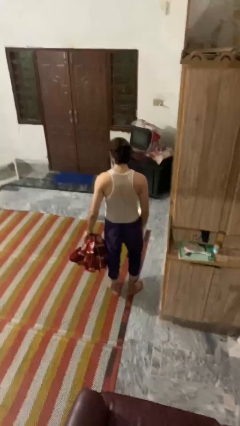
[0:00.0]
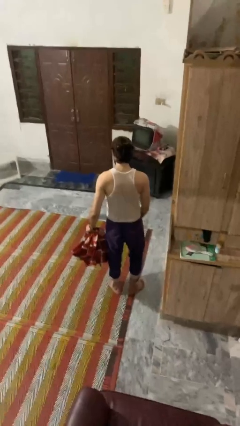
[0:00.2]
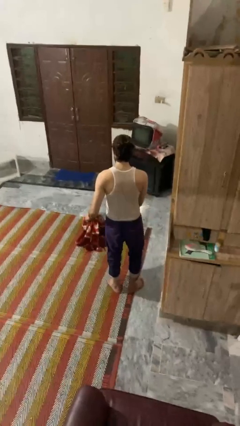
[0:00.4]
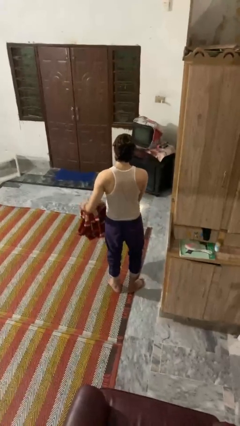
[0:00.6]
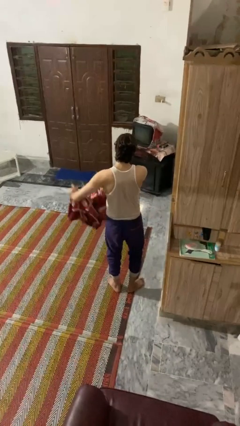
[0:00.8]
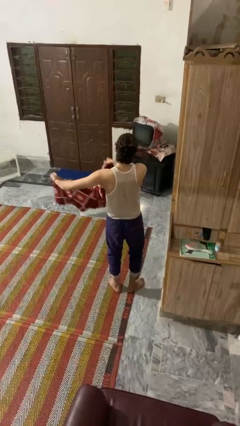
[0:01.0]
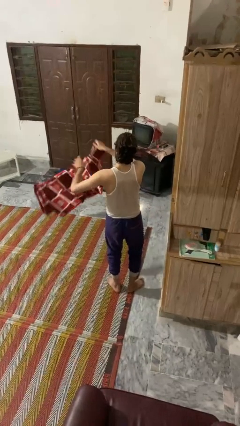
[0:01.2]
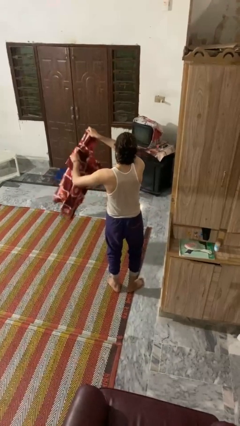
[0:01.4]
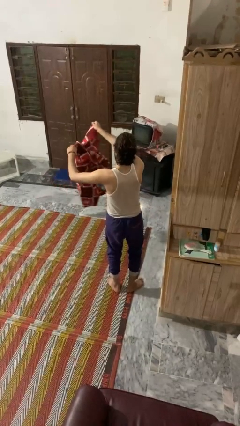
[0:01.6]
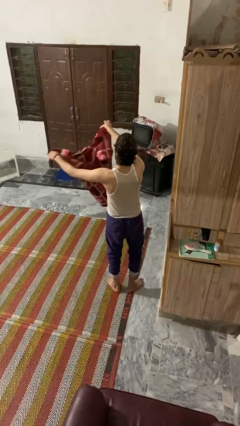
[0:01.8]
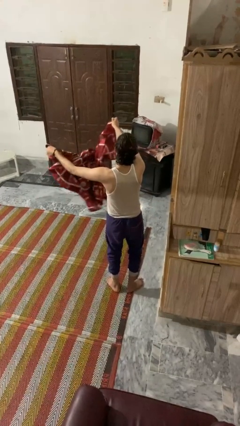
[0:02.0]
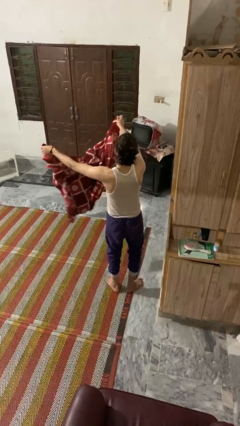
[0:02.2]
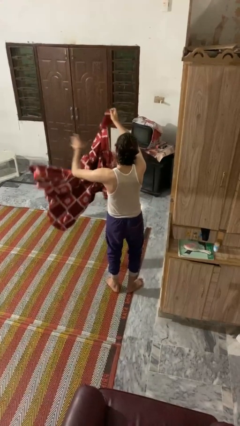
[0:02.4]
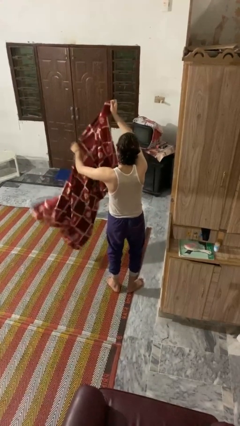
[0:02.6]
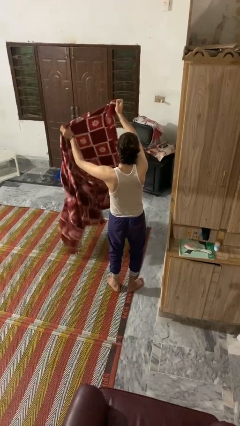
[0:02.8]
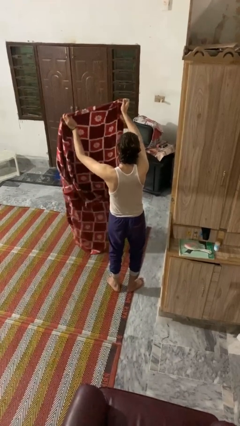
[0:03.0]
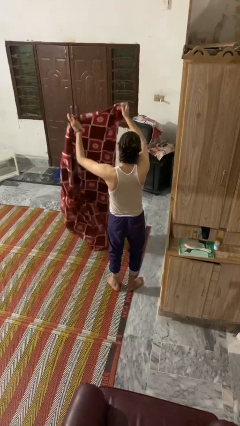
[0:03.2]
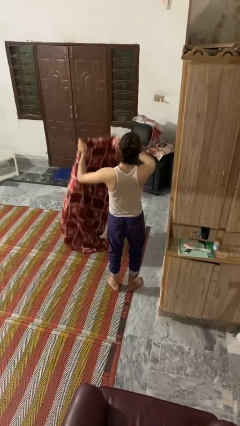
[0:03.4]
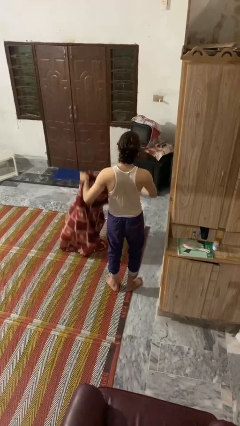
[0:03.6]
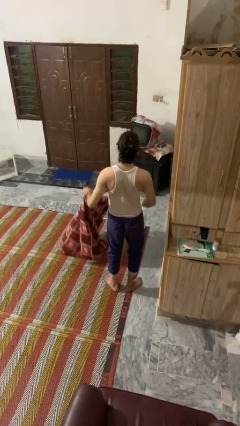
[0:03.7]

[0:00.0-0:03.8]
person unfolds blanket

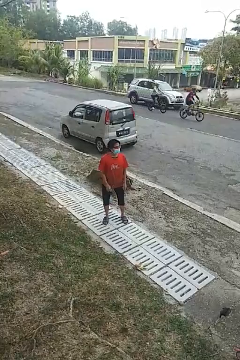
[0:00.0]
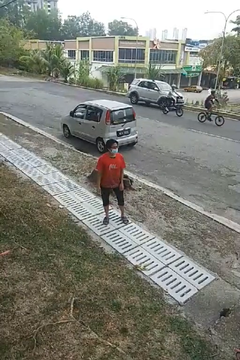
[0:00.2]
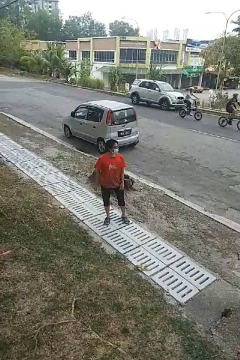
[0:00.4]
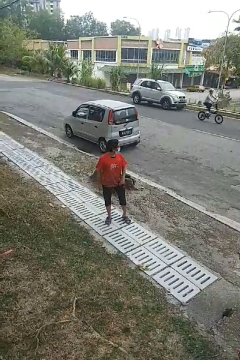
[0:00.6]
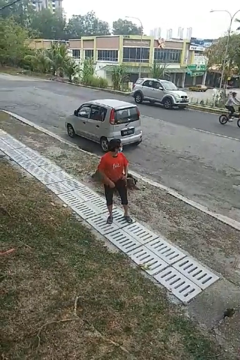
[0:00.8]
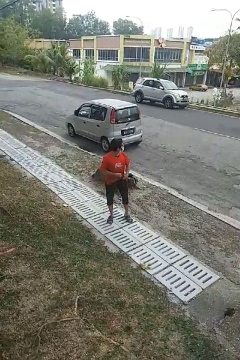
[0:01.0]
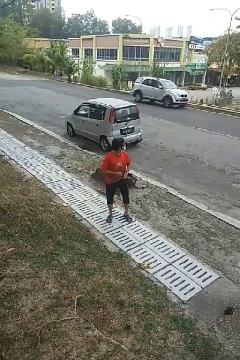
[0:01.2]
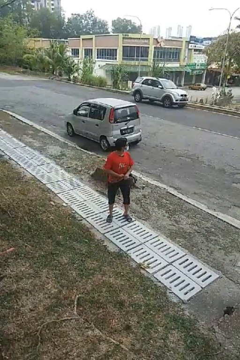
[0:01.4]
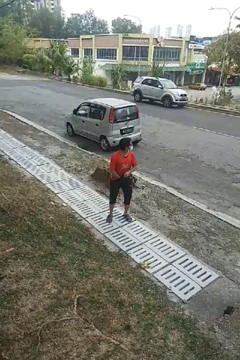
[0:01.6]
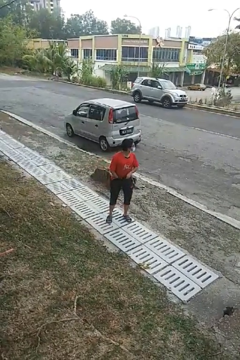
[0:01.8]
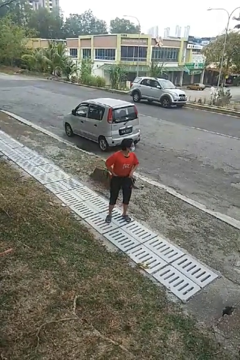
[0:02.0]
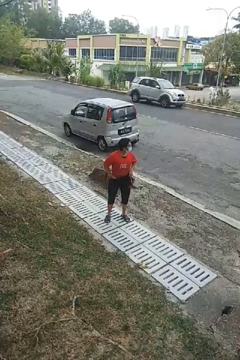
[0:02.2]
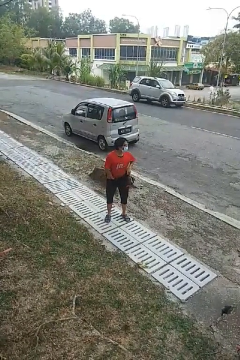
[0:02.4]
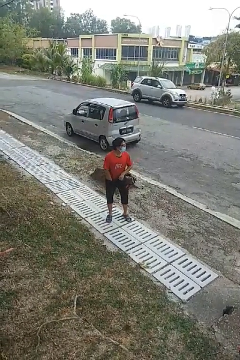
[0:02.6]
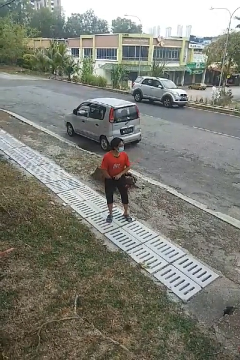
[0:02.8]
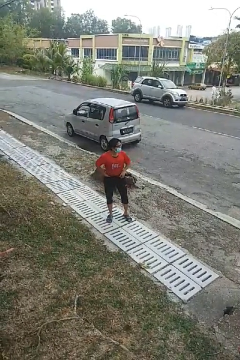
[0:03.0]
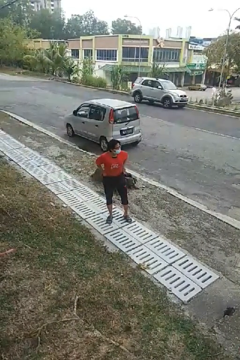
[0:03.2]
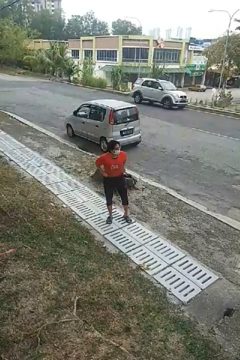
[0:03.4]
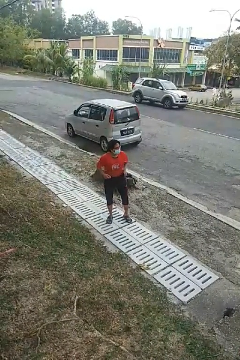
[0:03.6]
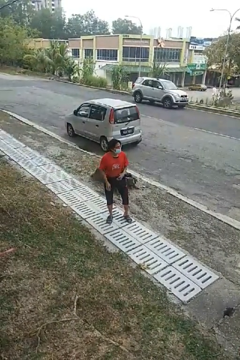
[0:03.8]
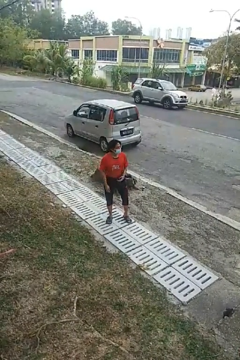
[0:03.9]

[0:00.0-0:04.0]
person tucks in shirt

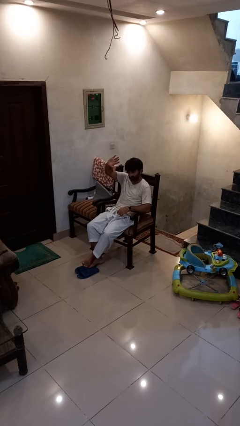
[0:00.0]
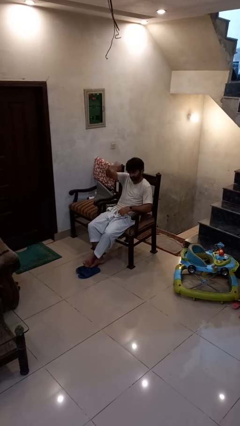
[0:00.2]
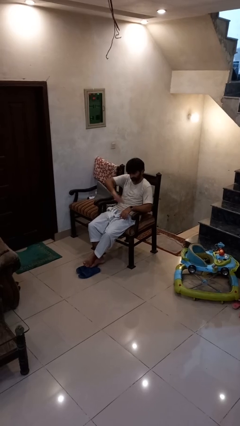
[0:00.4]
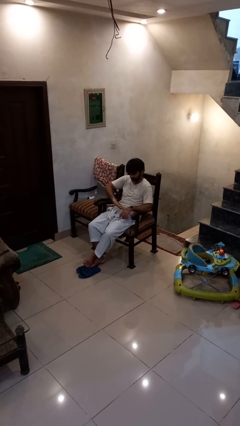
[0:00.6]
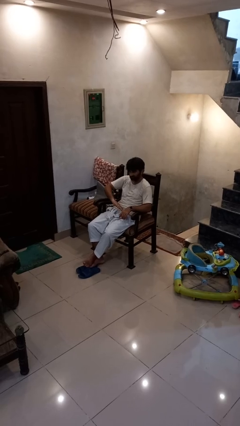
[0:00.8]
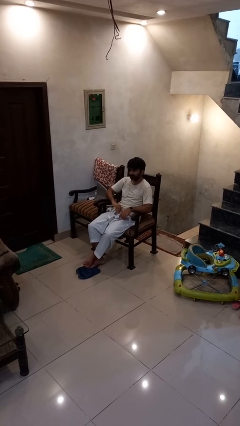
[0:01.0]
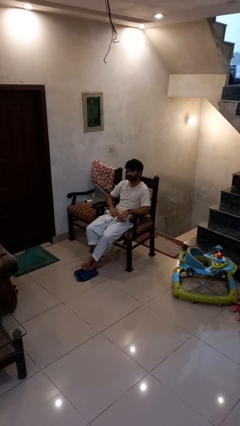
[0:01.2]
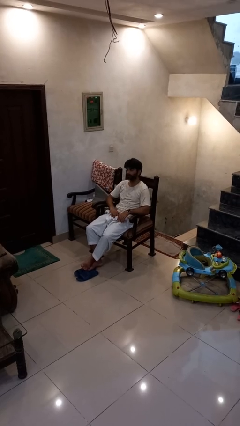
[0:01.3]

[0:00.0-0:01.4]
person gestures swipe down

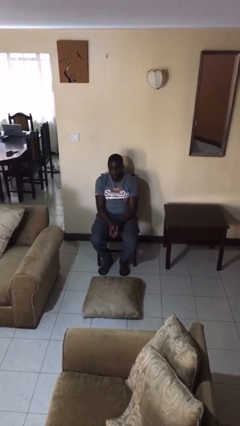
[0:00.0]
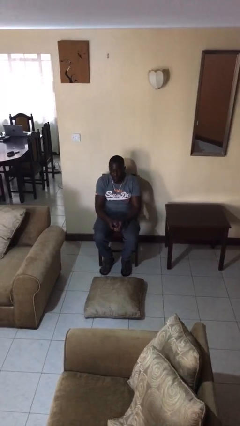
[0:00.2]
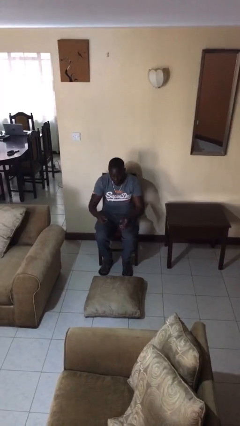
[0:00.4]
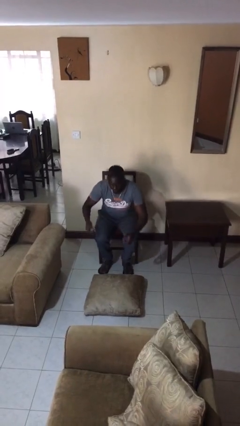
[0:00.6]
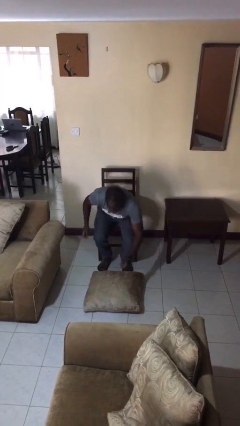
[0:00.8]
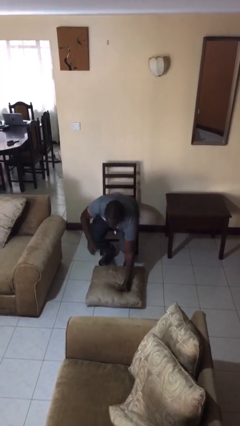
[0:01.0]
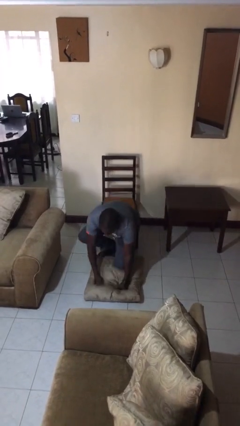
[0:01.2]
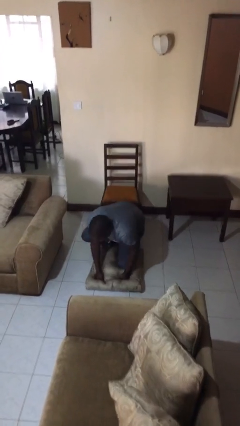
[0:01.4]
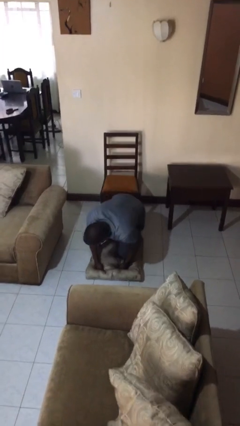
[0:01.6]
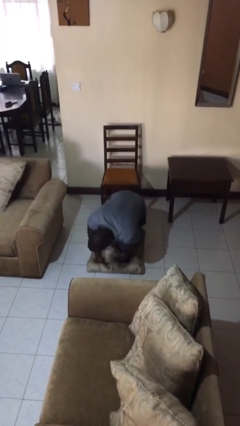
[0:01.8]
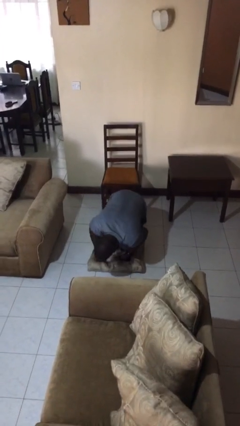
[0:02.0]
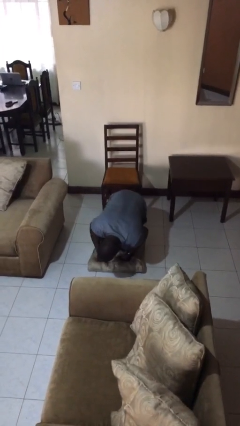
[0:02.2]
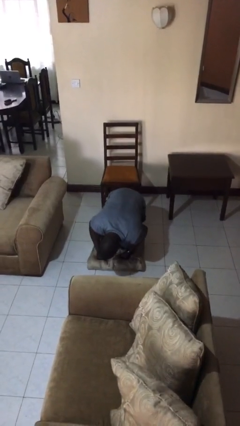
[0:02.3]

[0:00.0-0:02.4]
person falls from chair

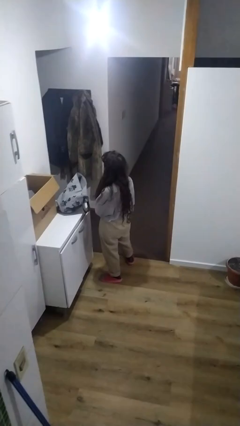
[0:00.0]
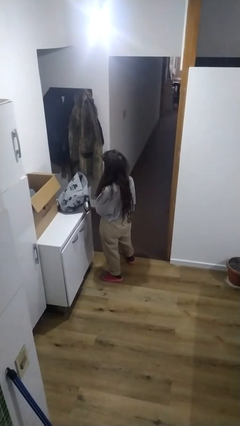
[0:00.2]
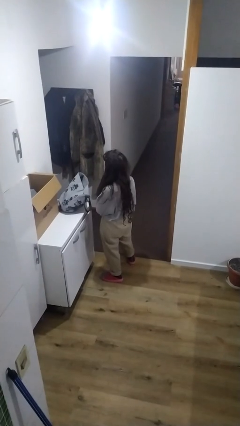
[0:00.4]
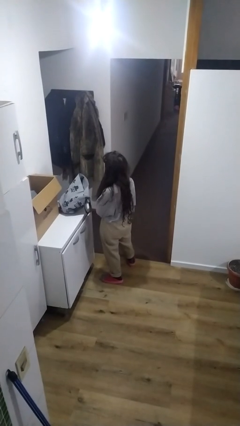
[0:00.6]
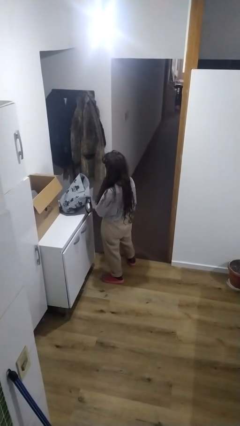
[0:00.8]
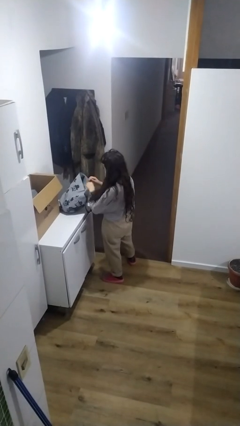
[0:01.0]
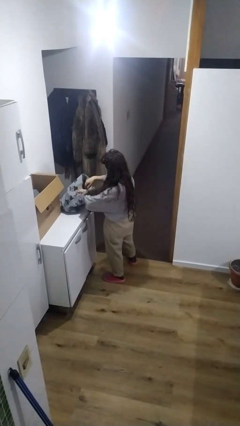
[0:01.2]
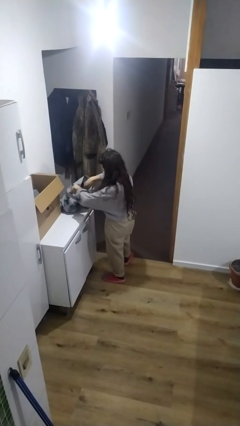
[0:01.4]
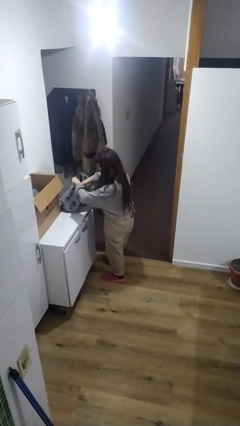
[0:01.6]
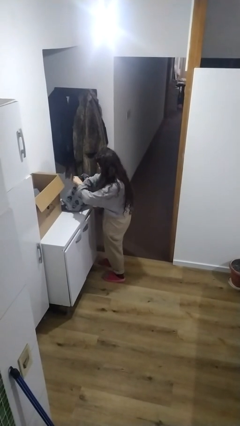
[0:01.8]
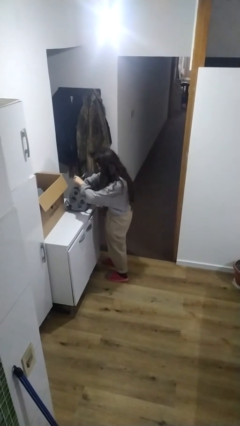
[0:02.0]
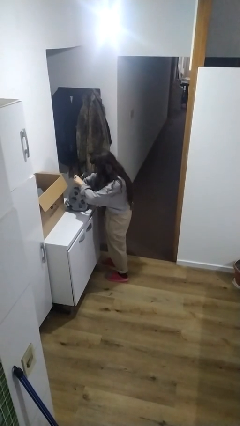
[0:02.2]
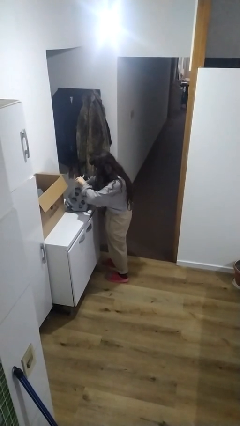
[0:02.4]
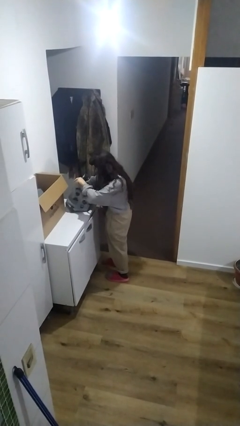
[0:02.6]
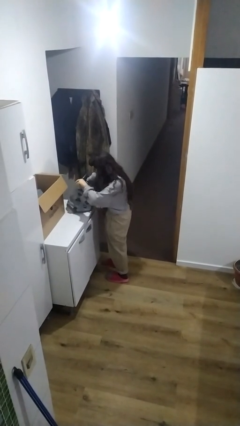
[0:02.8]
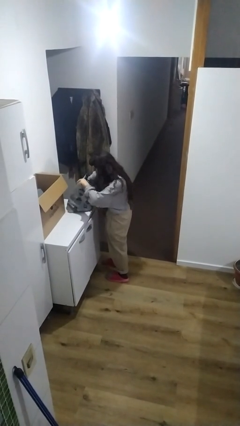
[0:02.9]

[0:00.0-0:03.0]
person searches in bag

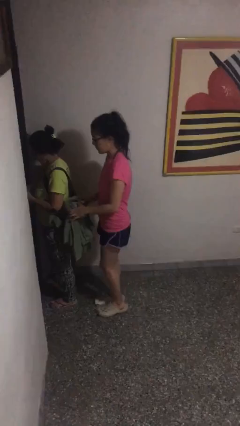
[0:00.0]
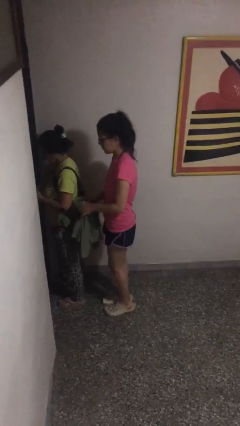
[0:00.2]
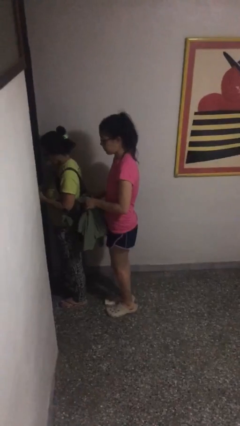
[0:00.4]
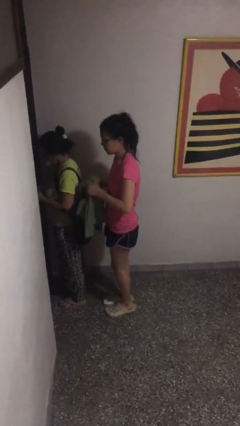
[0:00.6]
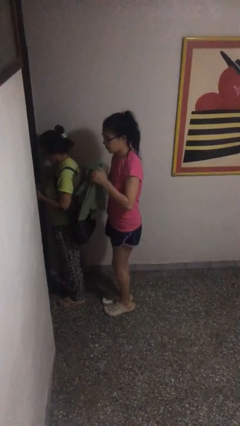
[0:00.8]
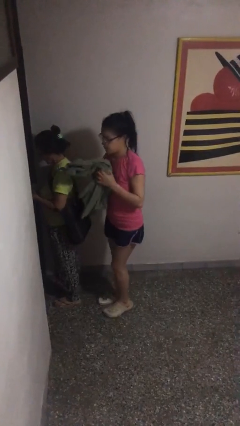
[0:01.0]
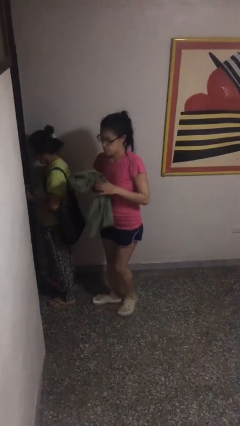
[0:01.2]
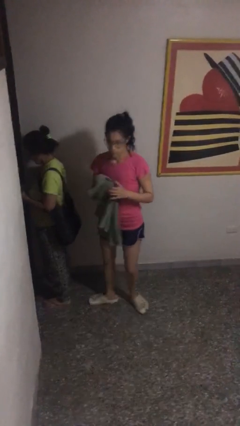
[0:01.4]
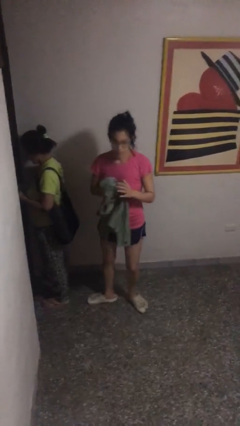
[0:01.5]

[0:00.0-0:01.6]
person steals object from person

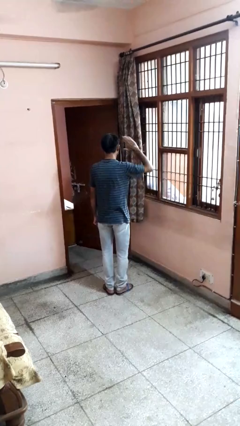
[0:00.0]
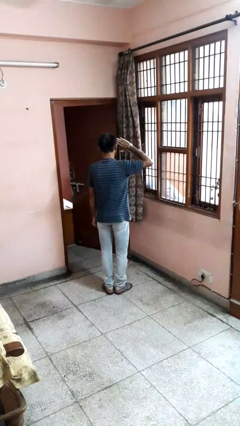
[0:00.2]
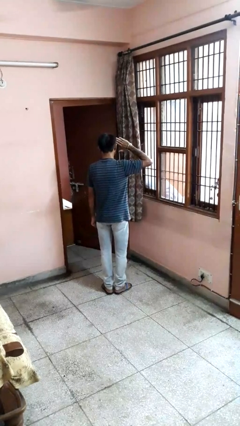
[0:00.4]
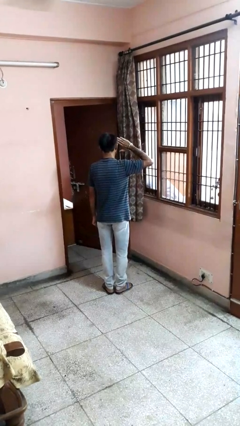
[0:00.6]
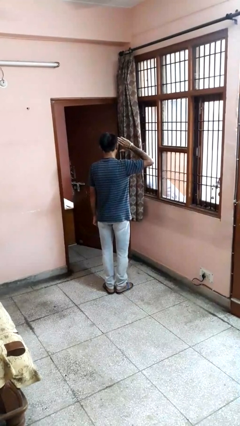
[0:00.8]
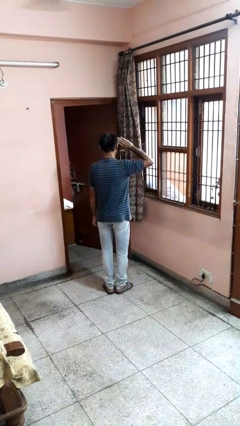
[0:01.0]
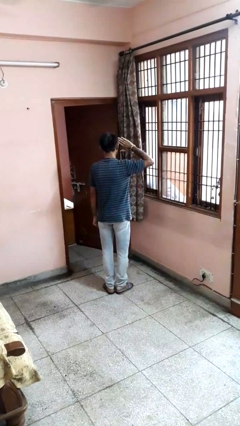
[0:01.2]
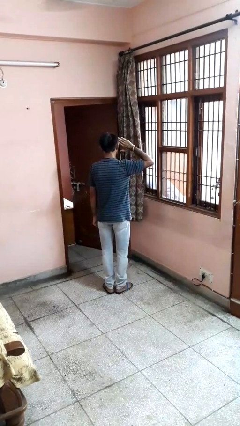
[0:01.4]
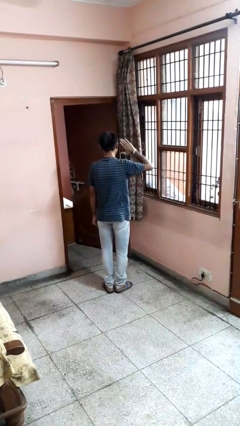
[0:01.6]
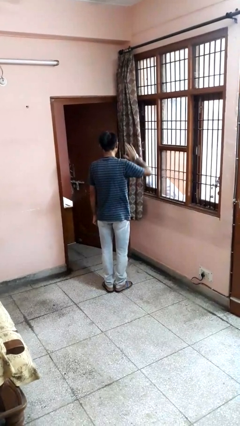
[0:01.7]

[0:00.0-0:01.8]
person salutes
